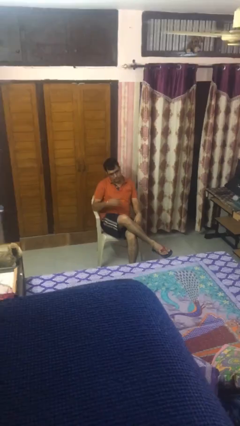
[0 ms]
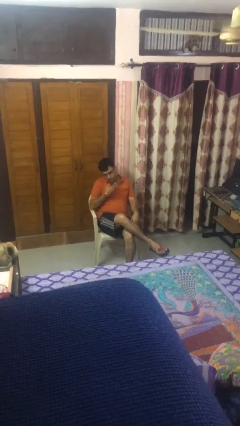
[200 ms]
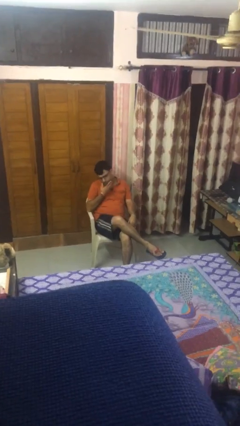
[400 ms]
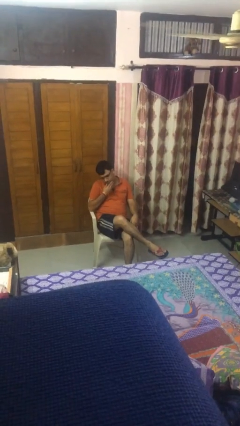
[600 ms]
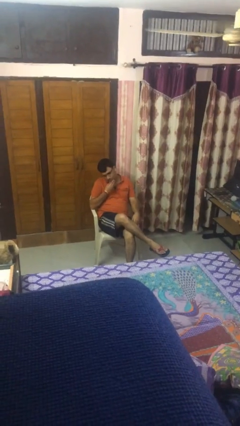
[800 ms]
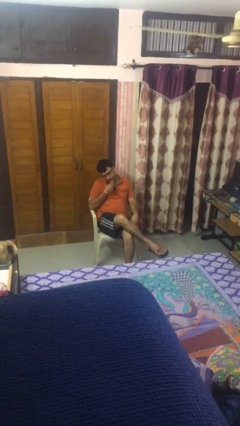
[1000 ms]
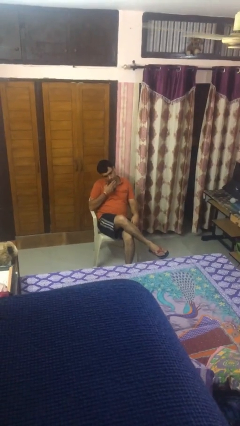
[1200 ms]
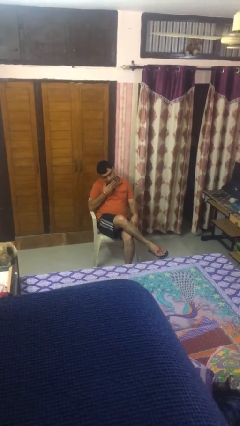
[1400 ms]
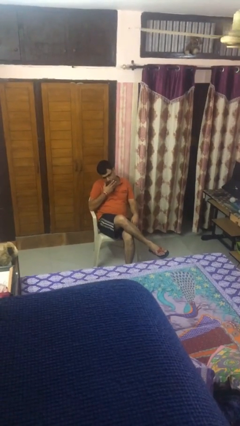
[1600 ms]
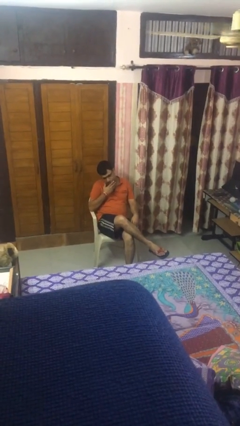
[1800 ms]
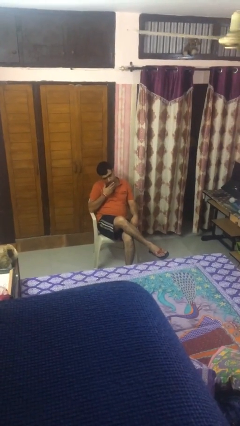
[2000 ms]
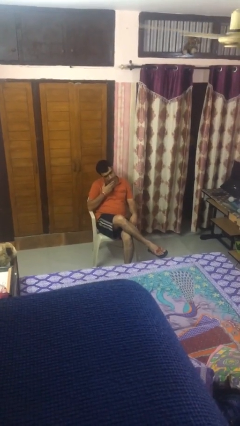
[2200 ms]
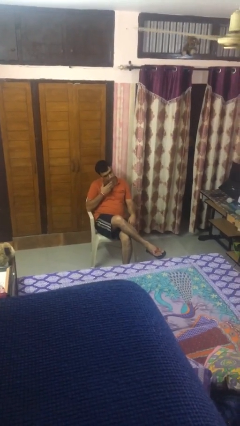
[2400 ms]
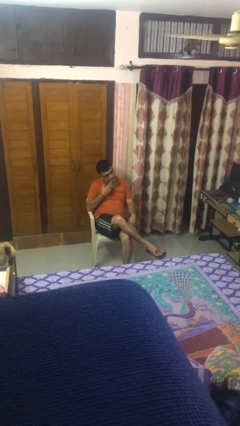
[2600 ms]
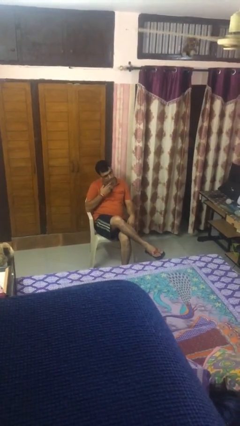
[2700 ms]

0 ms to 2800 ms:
person strokes chin

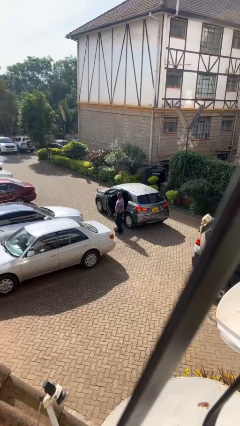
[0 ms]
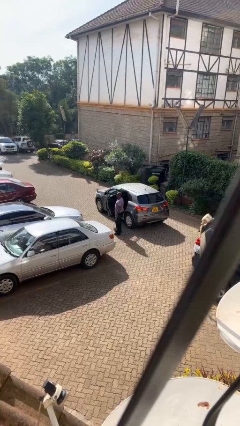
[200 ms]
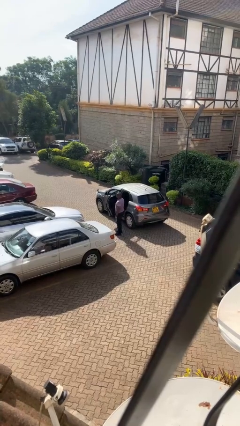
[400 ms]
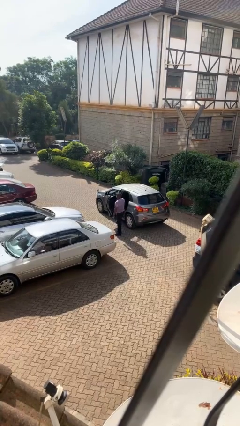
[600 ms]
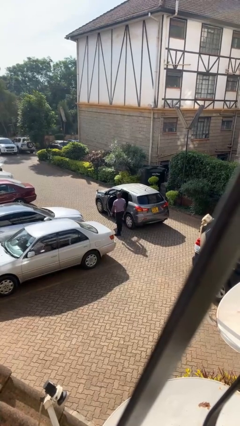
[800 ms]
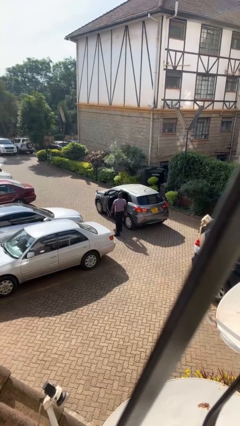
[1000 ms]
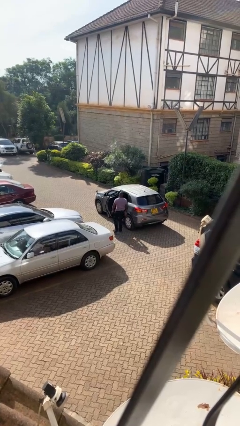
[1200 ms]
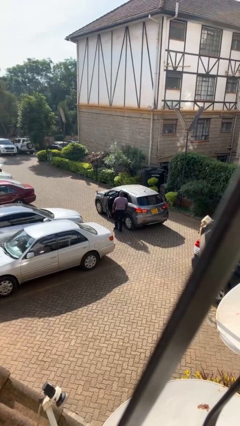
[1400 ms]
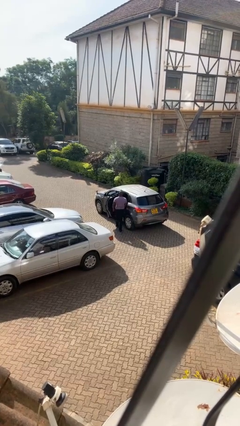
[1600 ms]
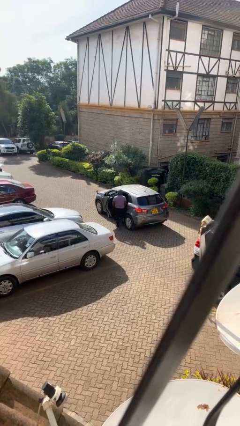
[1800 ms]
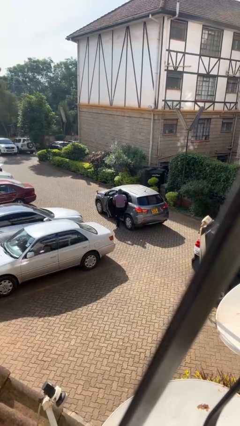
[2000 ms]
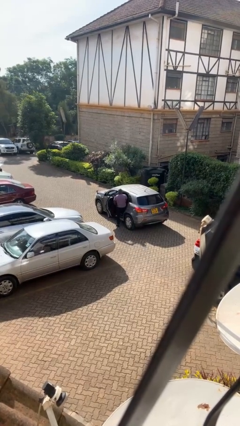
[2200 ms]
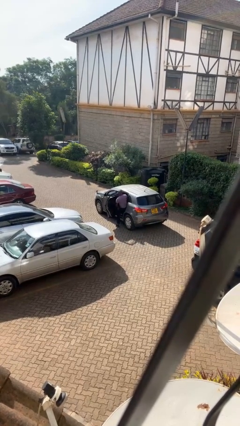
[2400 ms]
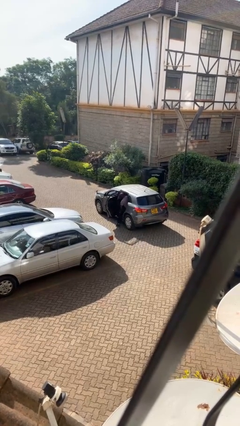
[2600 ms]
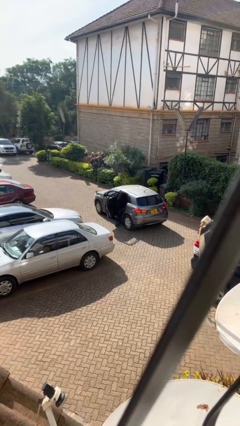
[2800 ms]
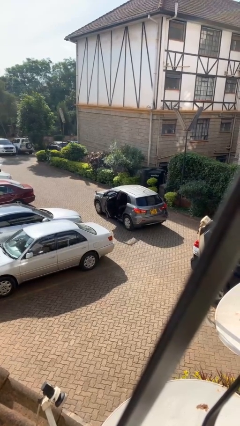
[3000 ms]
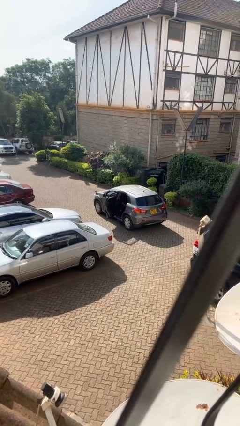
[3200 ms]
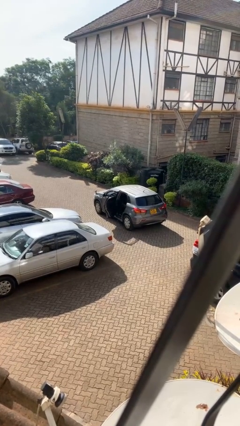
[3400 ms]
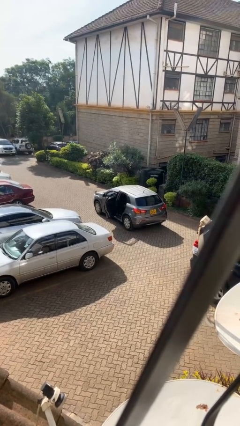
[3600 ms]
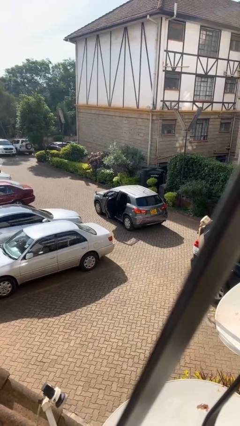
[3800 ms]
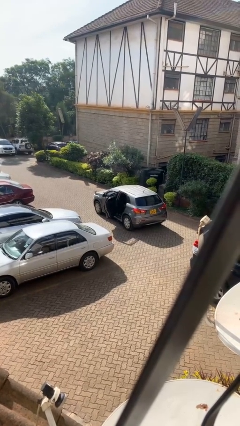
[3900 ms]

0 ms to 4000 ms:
person enters car

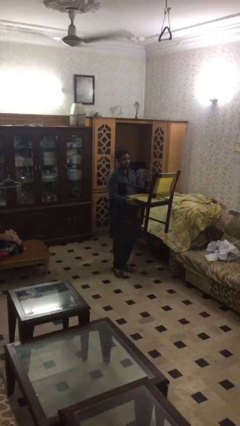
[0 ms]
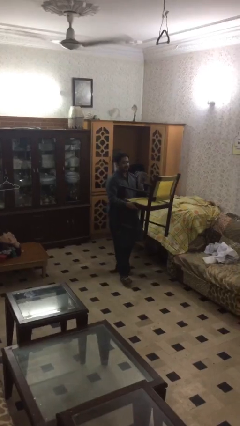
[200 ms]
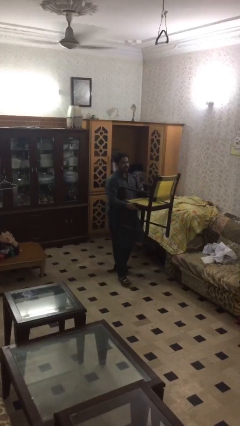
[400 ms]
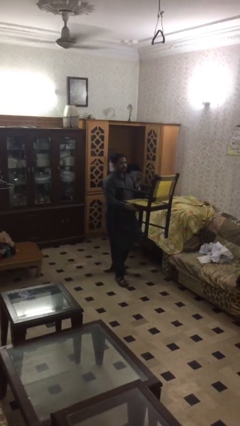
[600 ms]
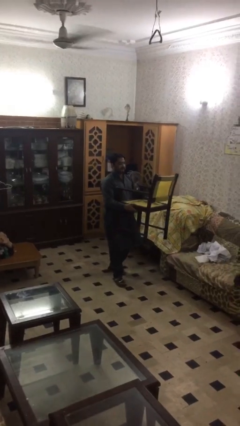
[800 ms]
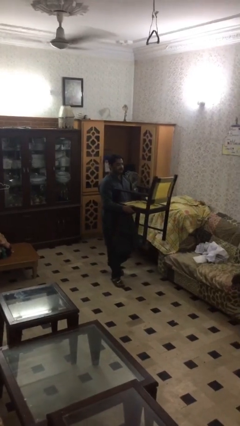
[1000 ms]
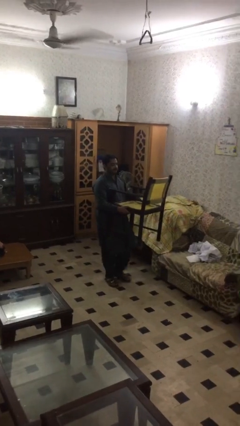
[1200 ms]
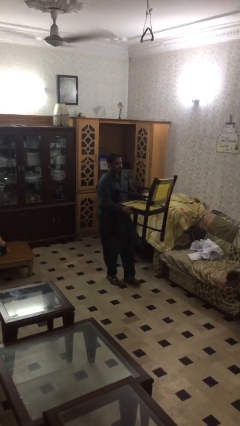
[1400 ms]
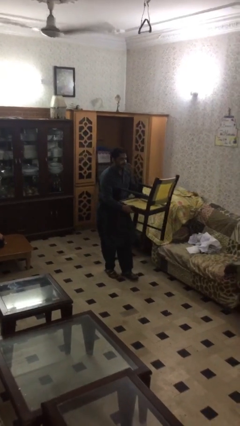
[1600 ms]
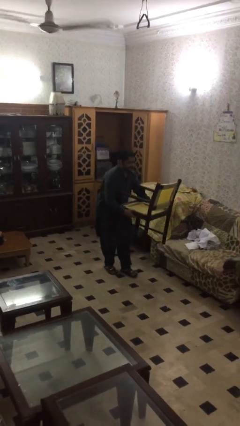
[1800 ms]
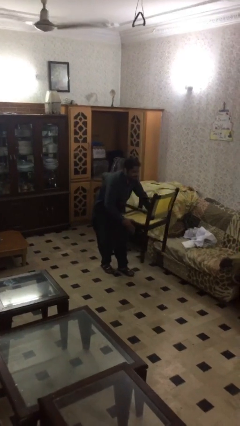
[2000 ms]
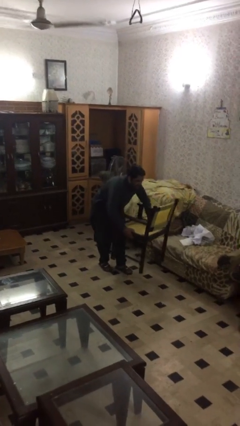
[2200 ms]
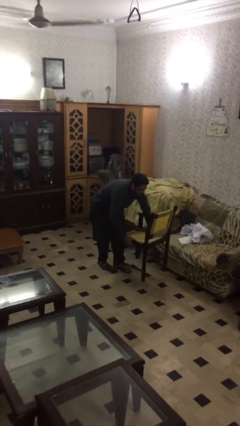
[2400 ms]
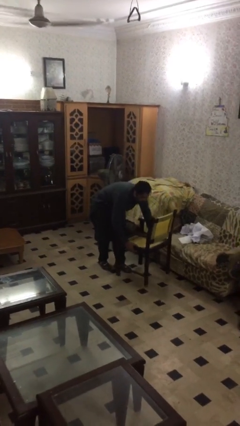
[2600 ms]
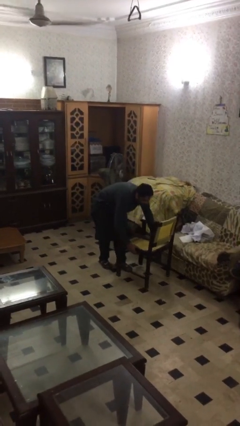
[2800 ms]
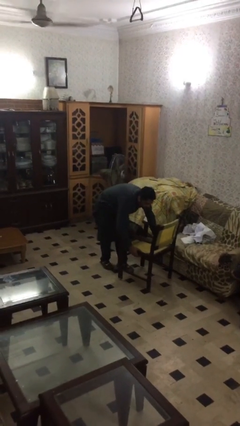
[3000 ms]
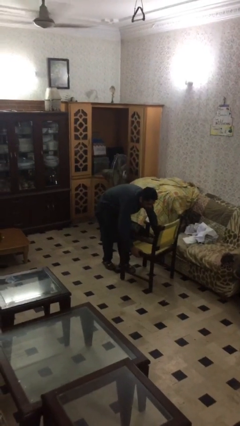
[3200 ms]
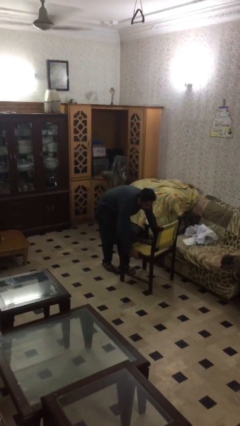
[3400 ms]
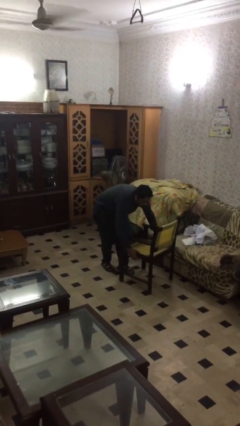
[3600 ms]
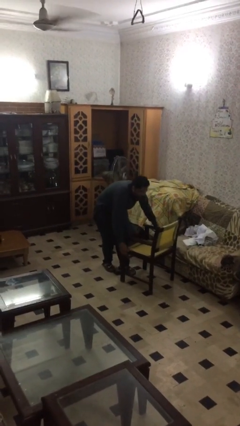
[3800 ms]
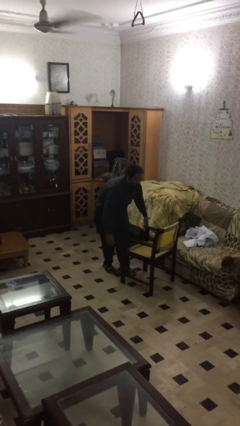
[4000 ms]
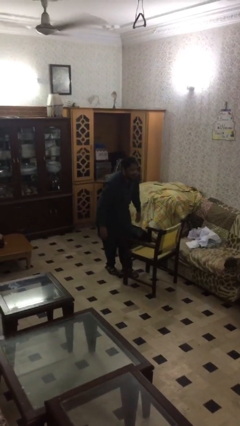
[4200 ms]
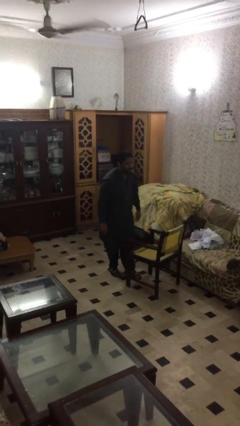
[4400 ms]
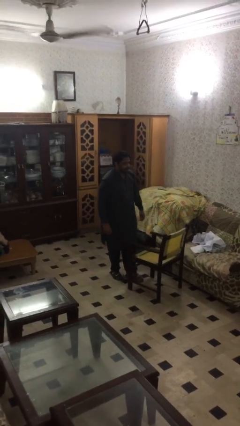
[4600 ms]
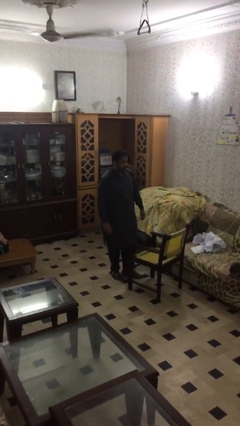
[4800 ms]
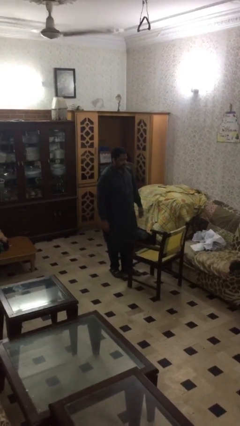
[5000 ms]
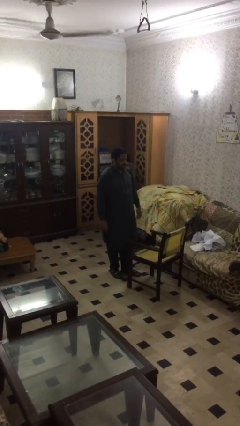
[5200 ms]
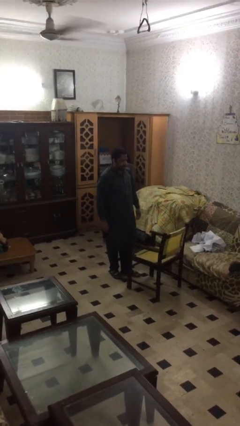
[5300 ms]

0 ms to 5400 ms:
person puts down object on floor

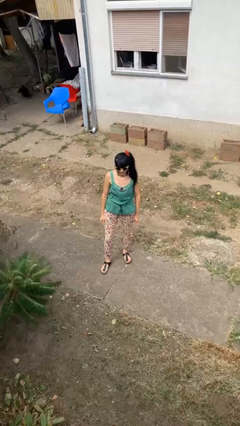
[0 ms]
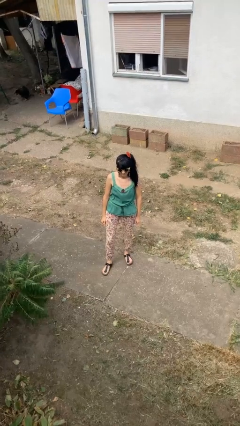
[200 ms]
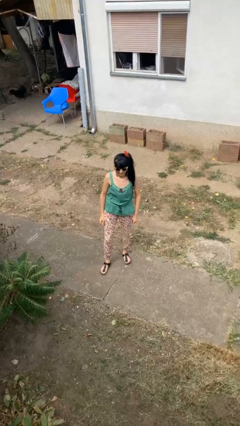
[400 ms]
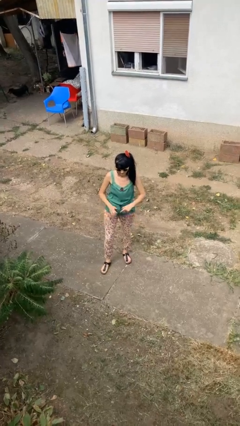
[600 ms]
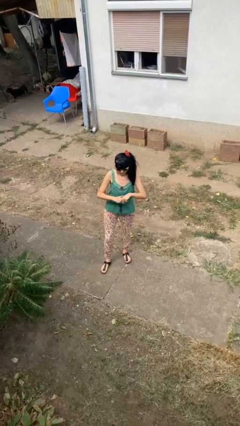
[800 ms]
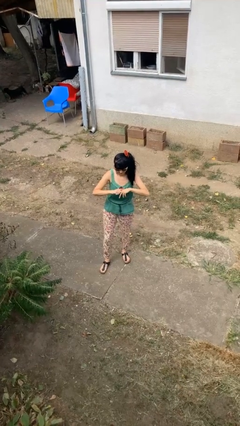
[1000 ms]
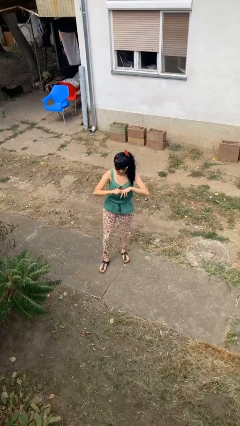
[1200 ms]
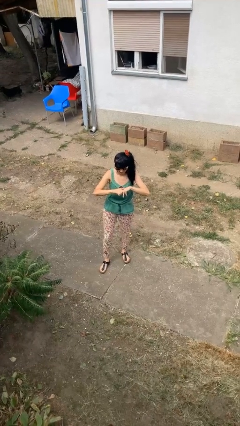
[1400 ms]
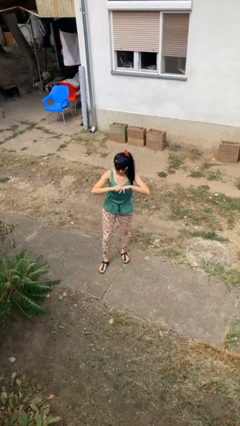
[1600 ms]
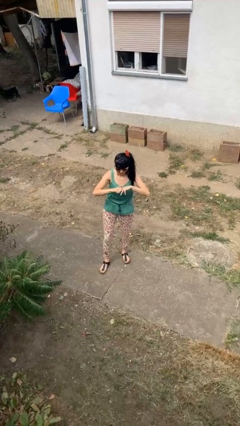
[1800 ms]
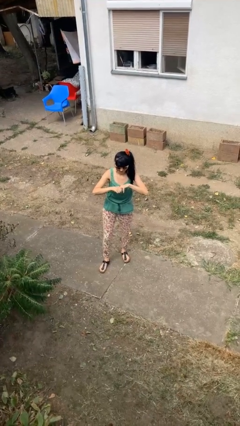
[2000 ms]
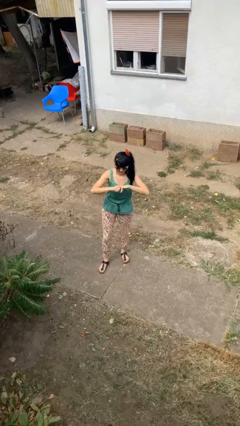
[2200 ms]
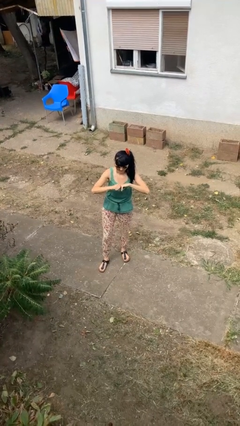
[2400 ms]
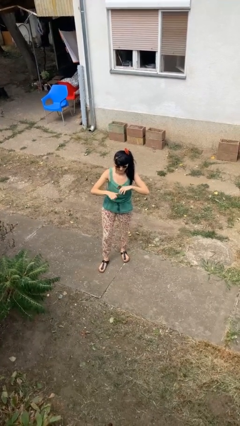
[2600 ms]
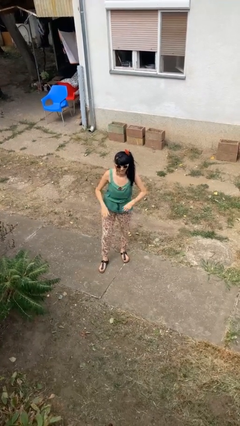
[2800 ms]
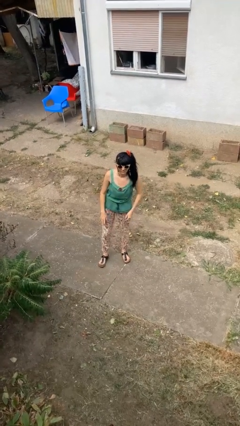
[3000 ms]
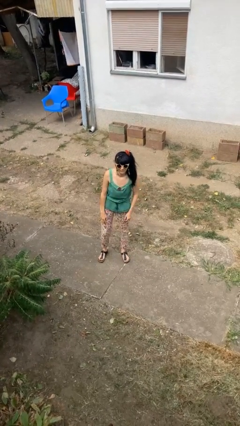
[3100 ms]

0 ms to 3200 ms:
person cracks knuckles

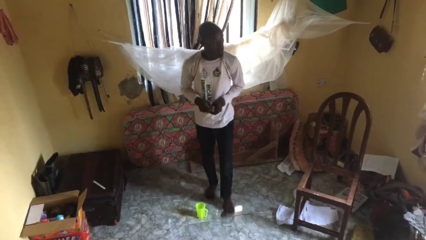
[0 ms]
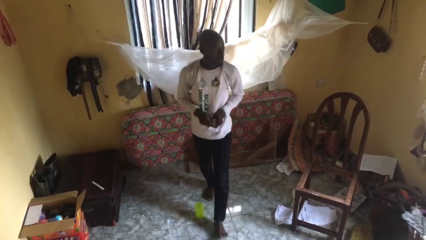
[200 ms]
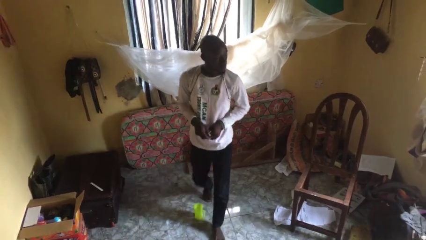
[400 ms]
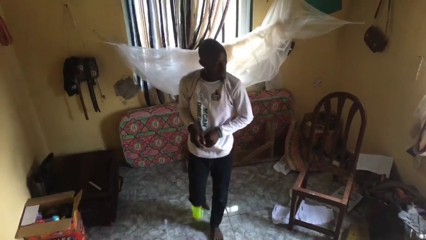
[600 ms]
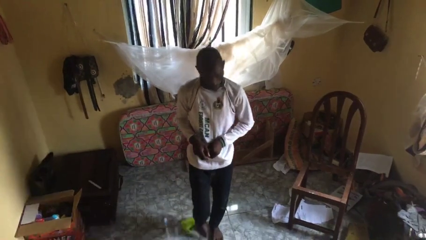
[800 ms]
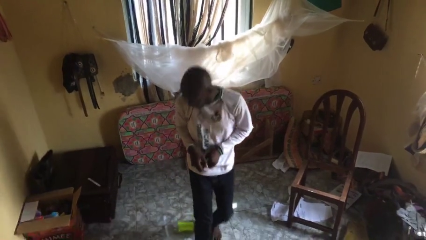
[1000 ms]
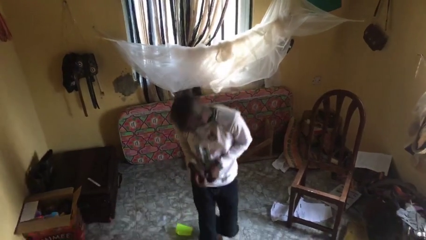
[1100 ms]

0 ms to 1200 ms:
person spills on floor

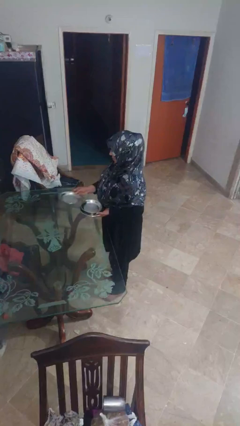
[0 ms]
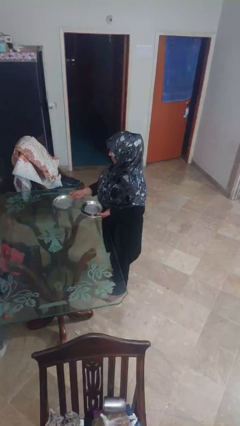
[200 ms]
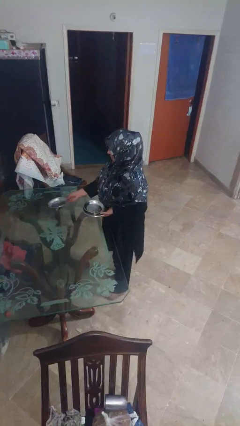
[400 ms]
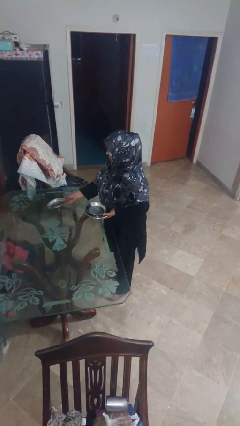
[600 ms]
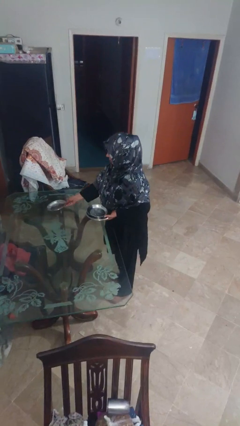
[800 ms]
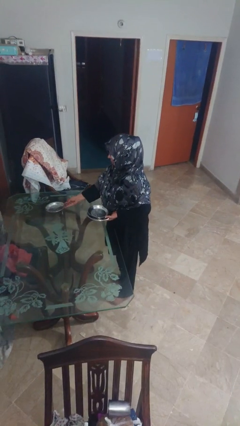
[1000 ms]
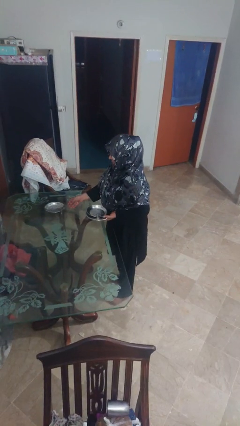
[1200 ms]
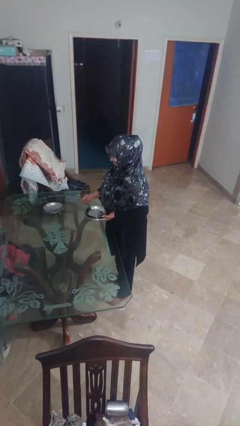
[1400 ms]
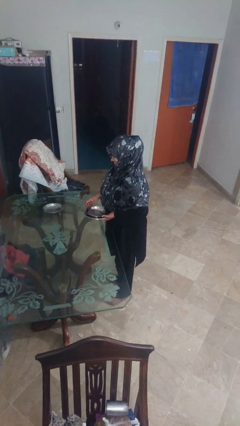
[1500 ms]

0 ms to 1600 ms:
person sets table
